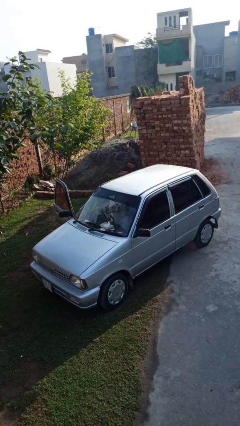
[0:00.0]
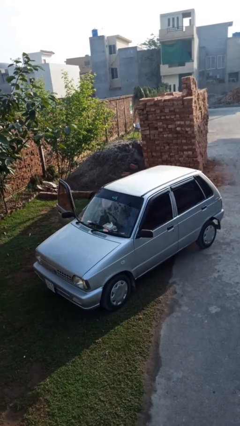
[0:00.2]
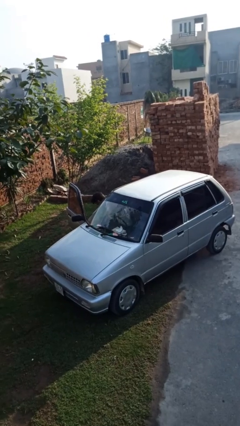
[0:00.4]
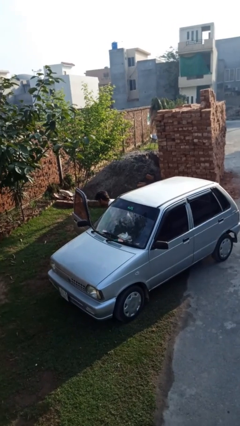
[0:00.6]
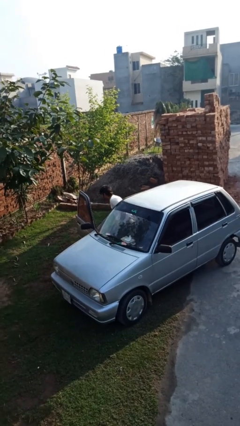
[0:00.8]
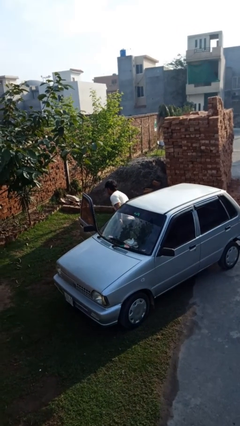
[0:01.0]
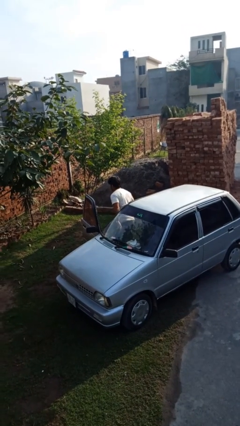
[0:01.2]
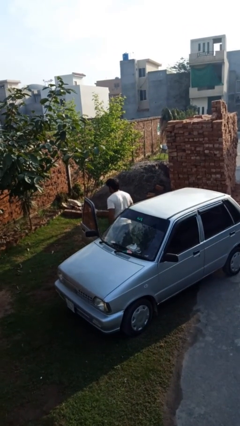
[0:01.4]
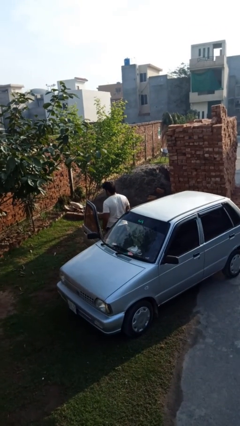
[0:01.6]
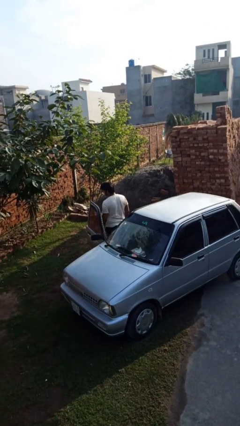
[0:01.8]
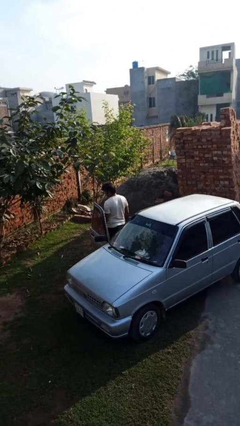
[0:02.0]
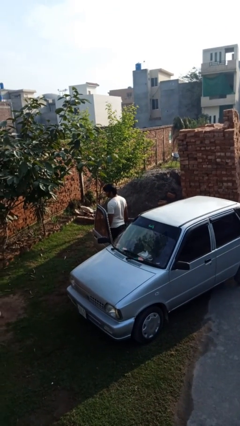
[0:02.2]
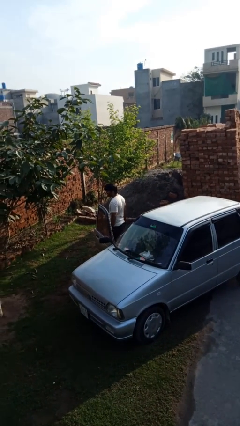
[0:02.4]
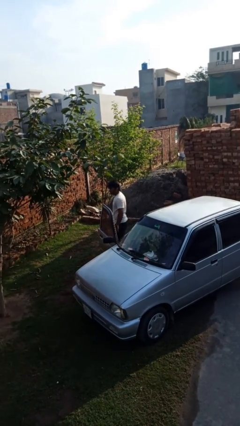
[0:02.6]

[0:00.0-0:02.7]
person exits car

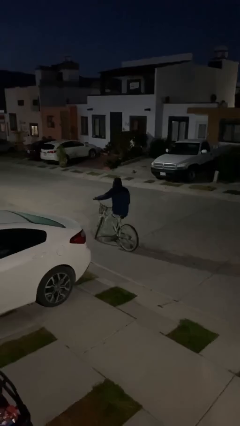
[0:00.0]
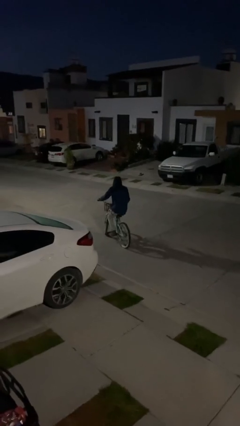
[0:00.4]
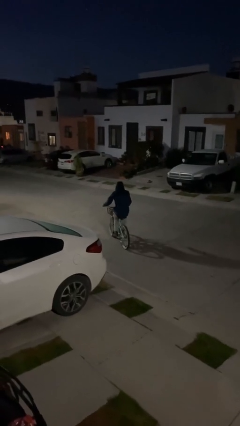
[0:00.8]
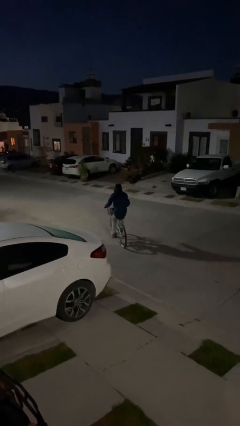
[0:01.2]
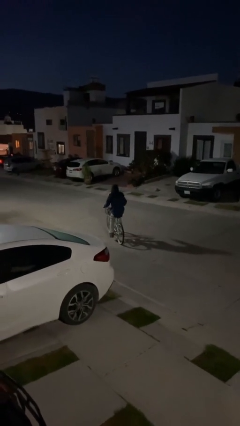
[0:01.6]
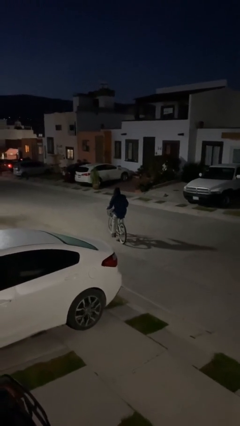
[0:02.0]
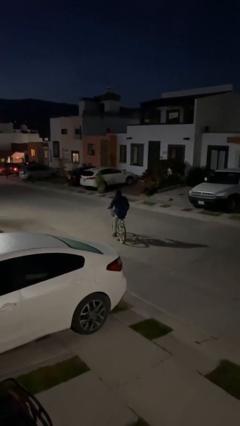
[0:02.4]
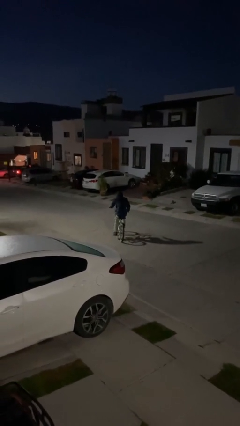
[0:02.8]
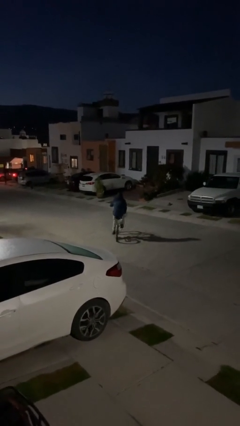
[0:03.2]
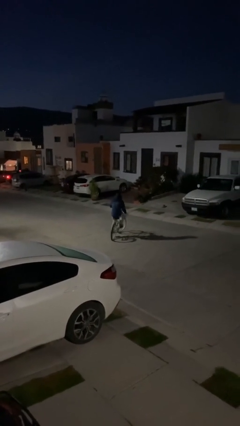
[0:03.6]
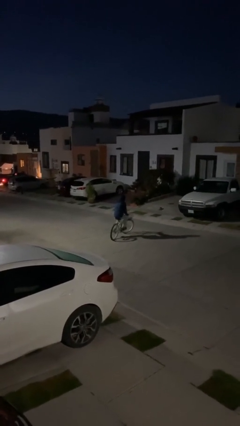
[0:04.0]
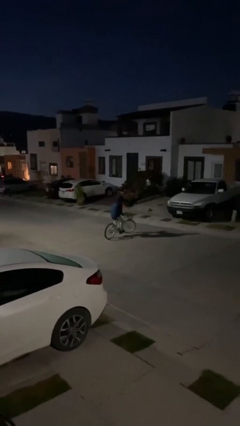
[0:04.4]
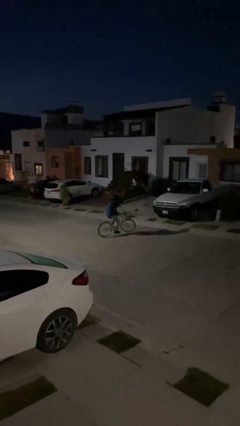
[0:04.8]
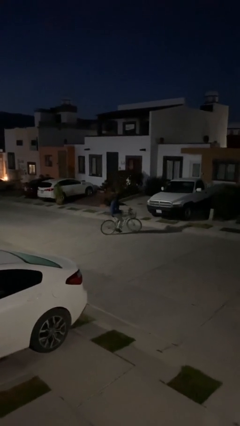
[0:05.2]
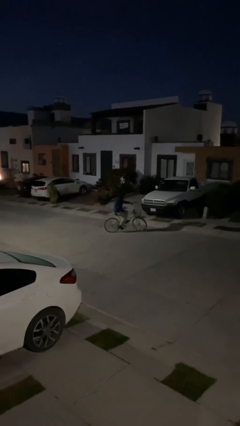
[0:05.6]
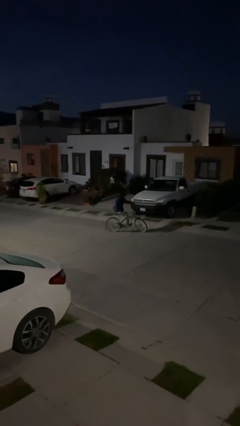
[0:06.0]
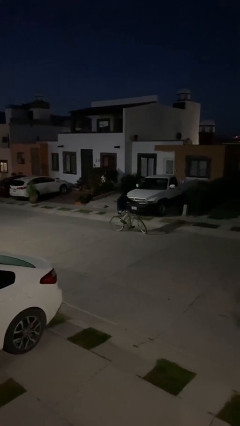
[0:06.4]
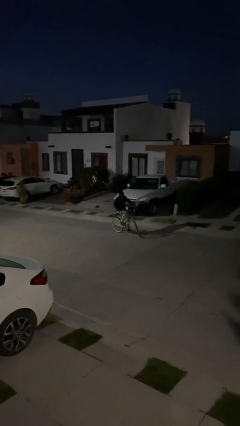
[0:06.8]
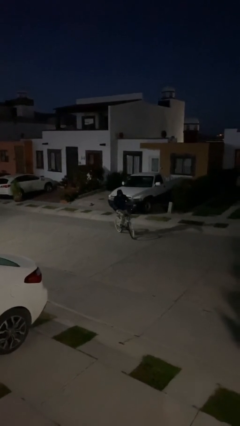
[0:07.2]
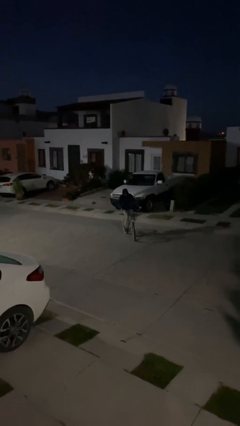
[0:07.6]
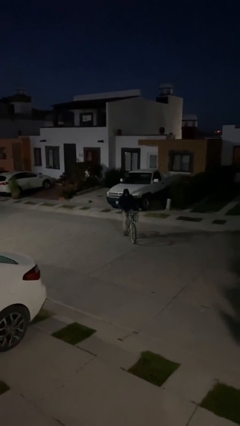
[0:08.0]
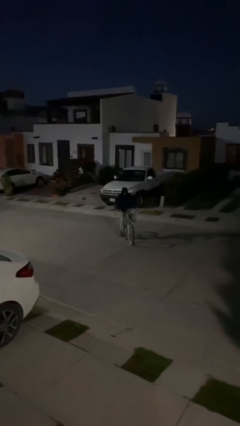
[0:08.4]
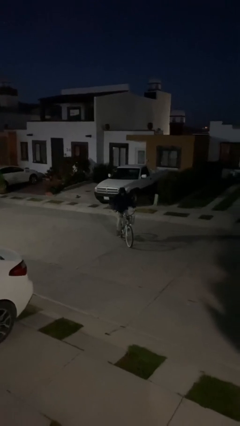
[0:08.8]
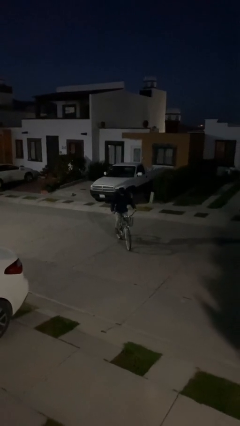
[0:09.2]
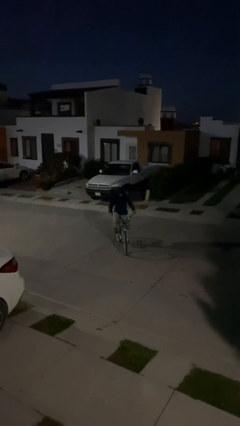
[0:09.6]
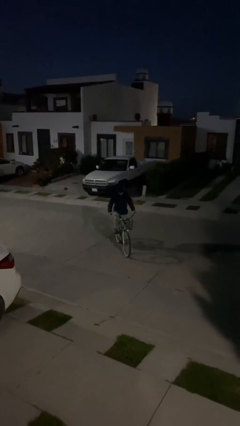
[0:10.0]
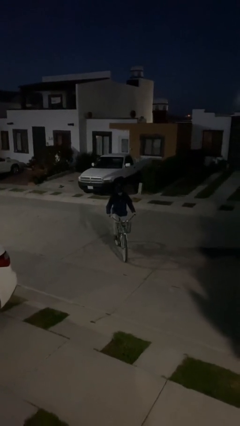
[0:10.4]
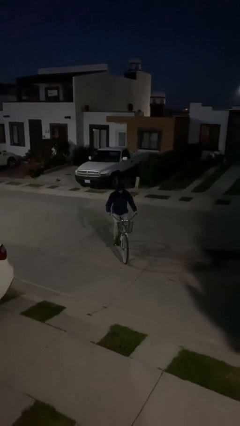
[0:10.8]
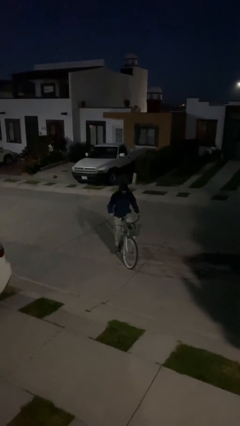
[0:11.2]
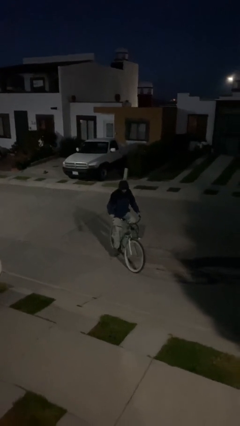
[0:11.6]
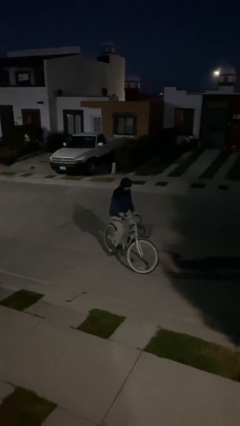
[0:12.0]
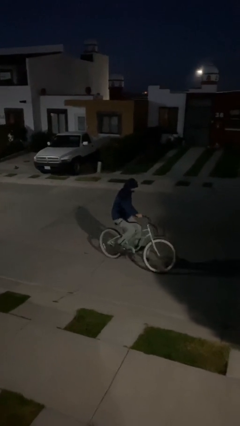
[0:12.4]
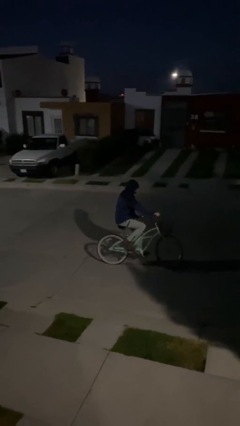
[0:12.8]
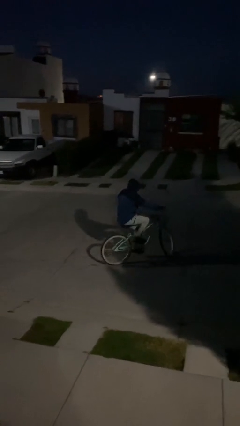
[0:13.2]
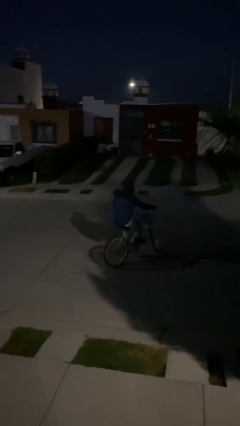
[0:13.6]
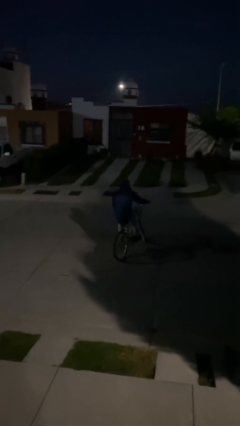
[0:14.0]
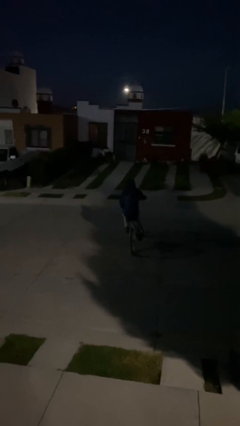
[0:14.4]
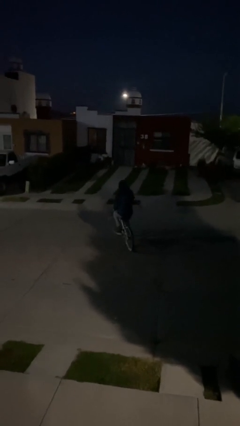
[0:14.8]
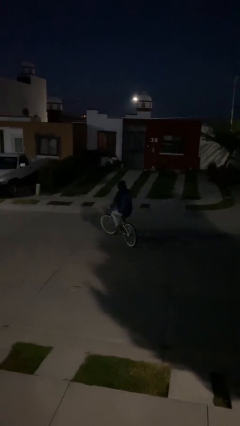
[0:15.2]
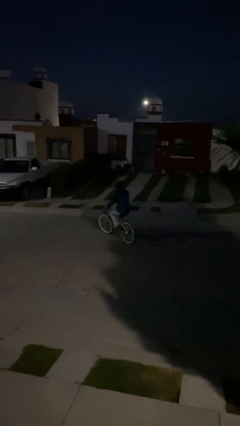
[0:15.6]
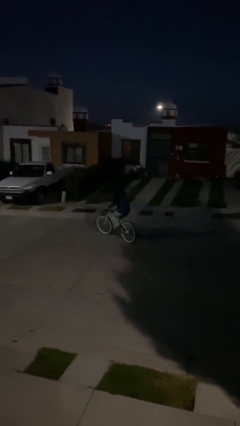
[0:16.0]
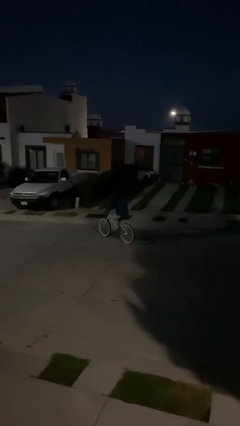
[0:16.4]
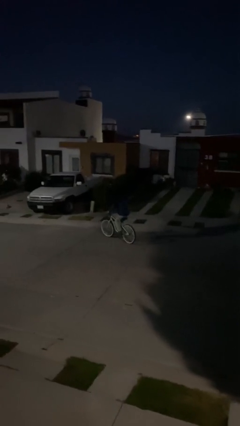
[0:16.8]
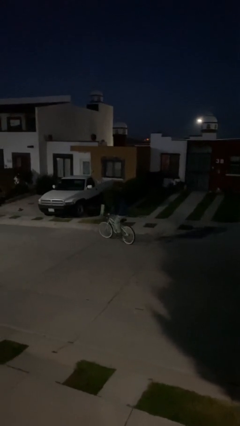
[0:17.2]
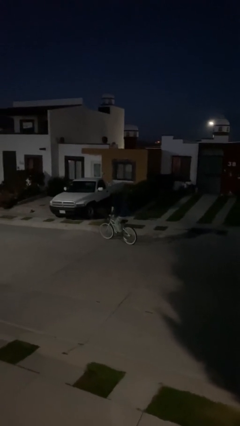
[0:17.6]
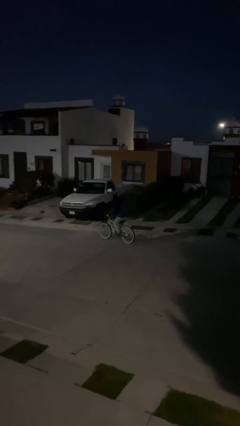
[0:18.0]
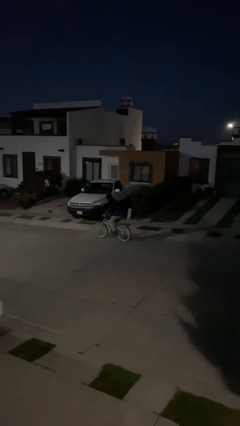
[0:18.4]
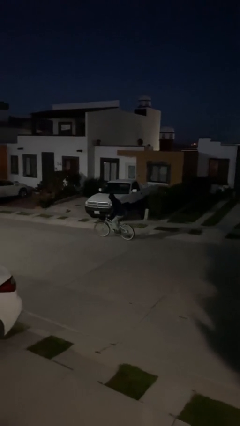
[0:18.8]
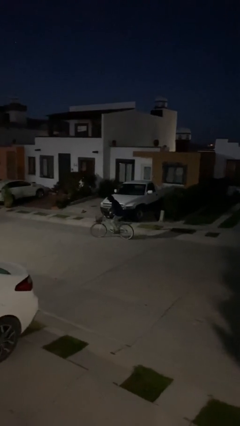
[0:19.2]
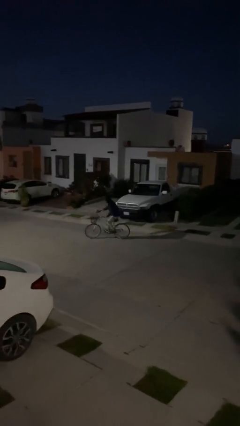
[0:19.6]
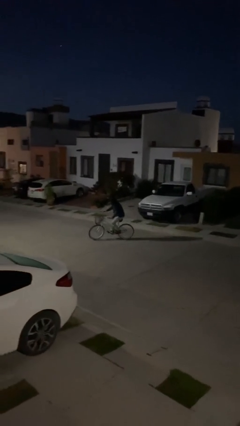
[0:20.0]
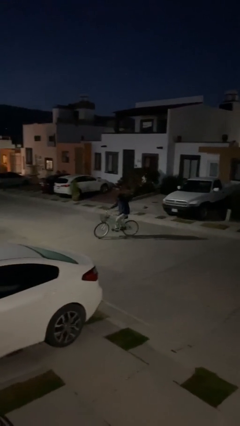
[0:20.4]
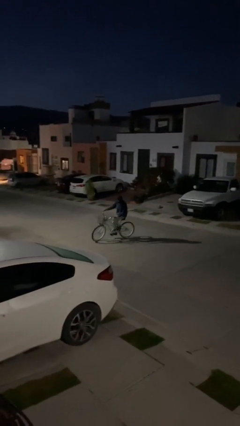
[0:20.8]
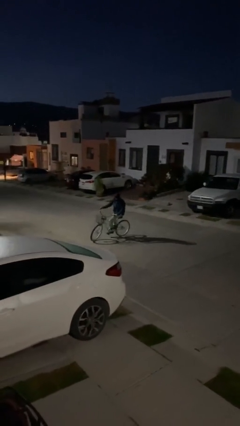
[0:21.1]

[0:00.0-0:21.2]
person rides bicycle

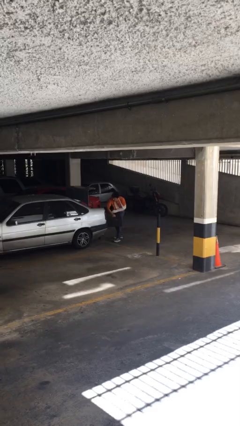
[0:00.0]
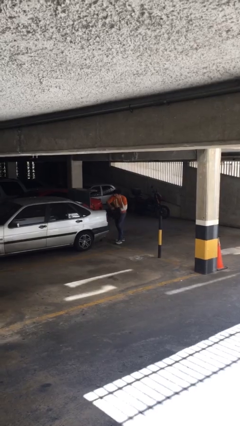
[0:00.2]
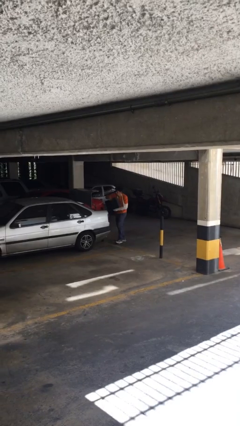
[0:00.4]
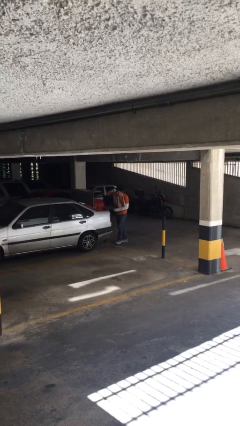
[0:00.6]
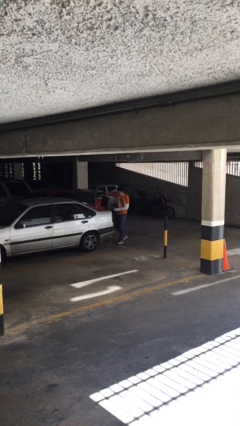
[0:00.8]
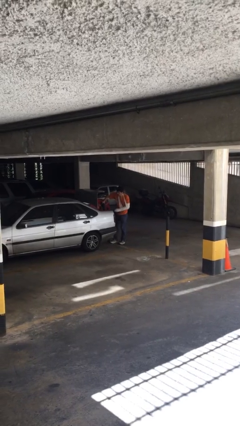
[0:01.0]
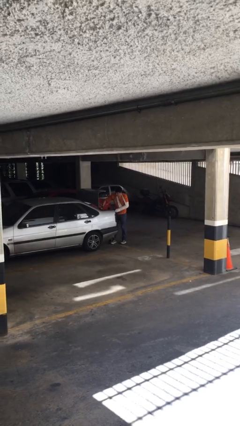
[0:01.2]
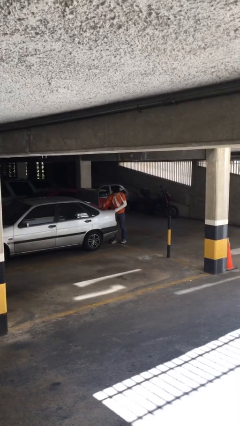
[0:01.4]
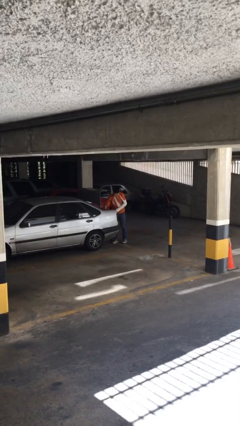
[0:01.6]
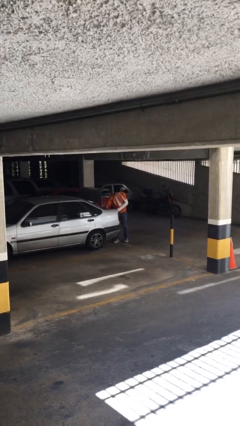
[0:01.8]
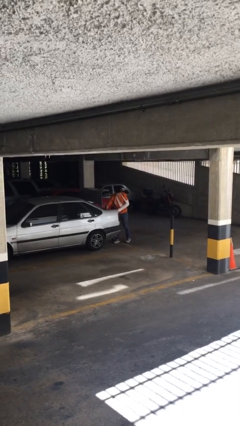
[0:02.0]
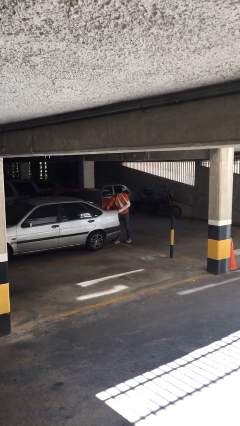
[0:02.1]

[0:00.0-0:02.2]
person loads car

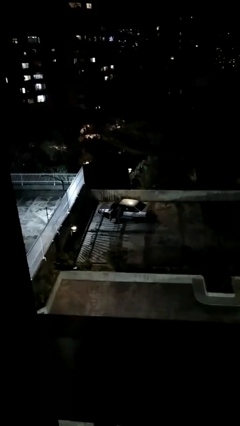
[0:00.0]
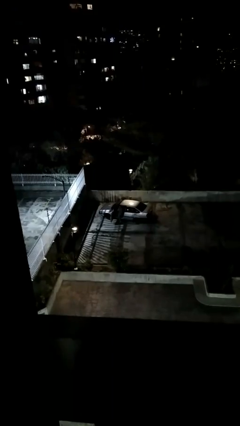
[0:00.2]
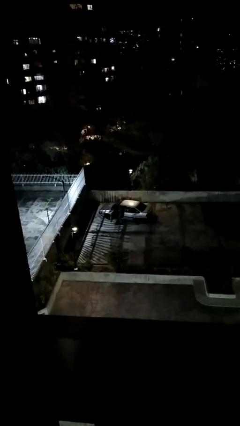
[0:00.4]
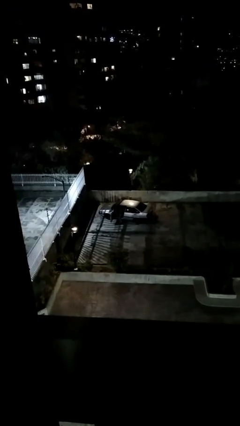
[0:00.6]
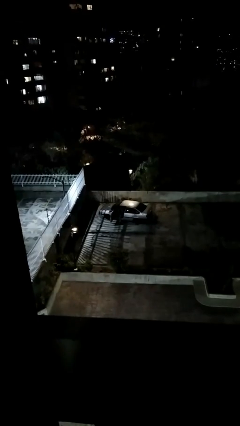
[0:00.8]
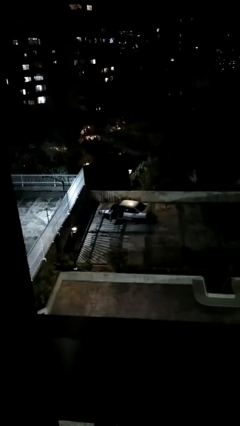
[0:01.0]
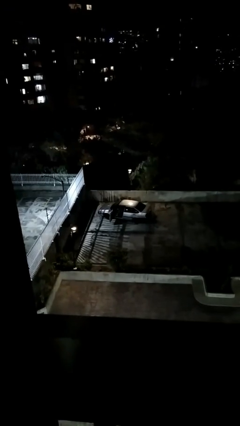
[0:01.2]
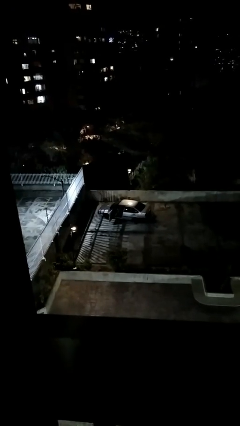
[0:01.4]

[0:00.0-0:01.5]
person enters car

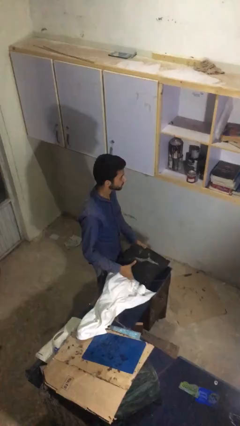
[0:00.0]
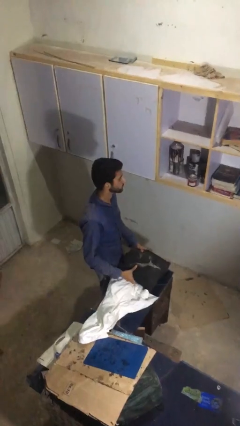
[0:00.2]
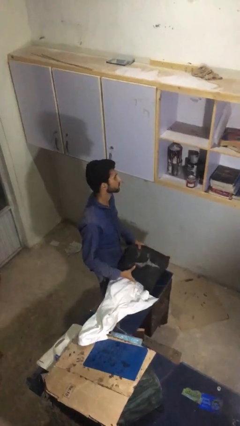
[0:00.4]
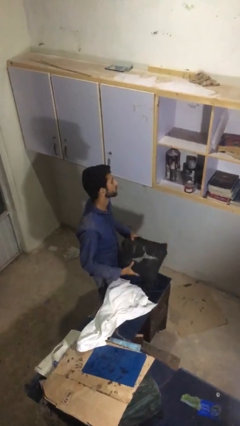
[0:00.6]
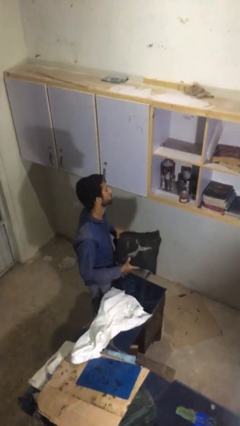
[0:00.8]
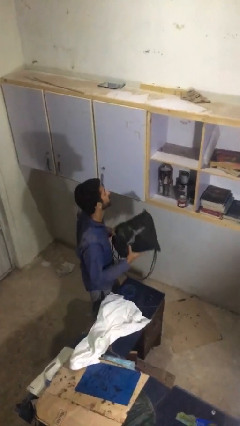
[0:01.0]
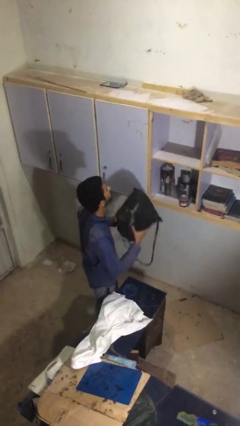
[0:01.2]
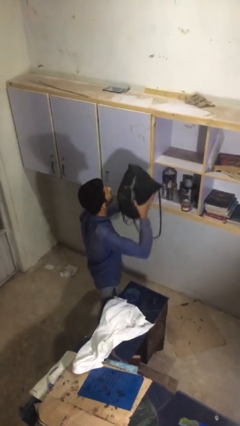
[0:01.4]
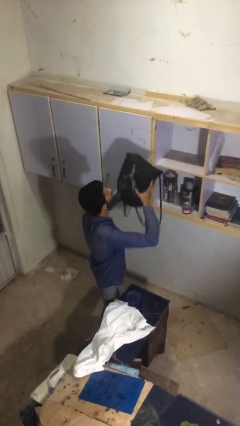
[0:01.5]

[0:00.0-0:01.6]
person picks up object from table
